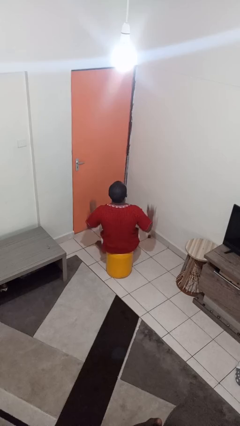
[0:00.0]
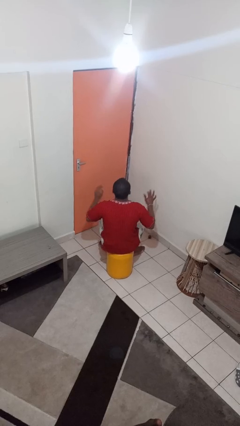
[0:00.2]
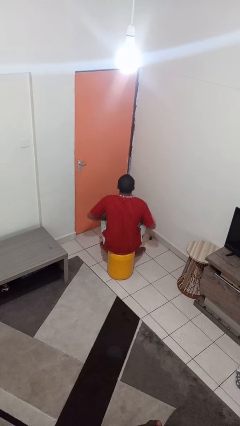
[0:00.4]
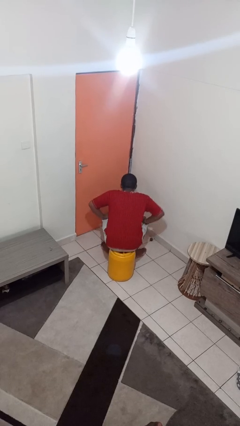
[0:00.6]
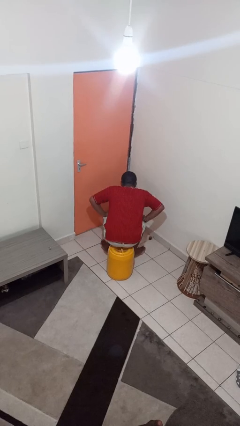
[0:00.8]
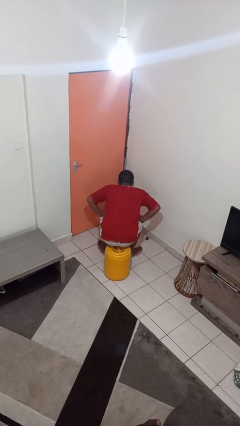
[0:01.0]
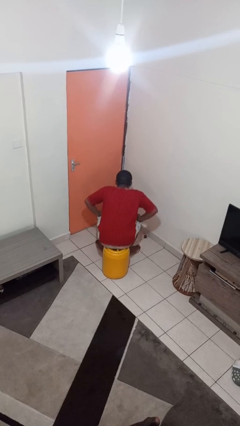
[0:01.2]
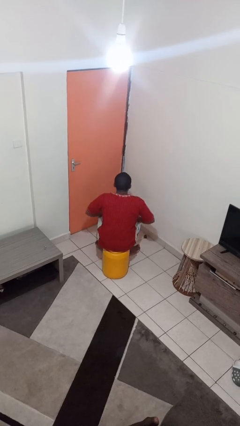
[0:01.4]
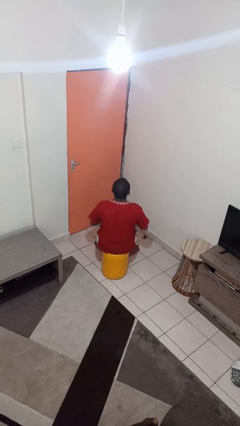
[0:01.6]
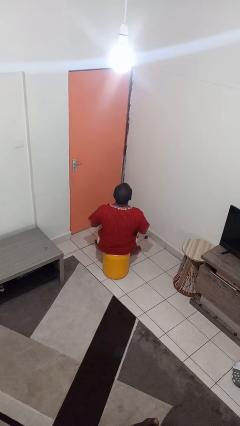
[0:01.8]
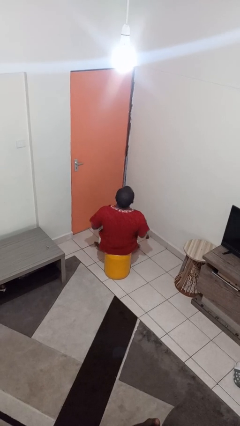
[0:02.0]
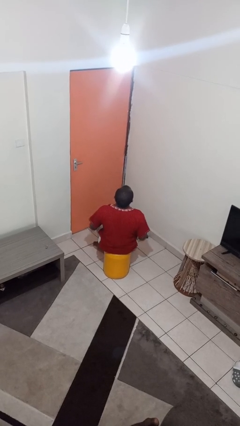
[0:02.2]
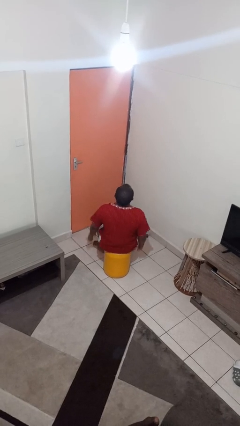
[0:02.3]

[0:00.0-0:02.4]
person slaps hands on thighs

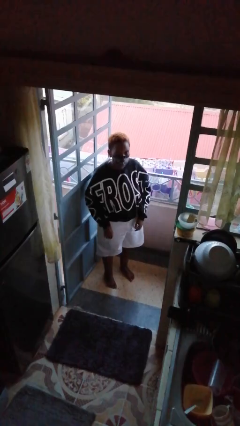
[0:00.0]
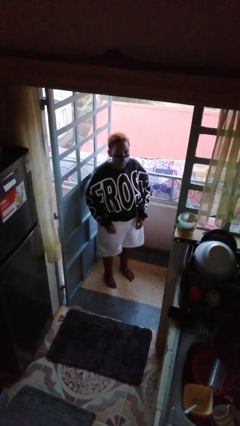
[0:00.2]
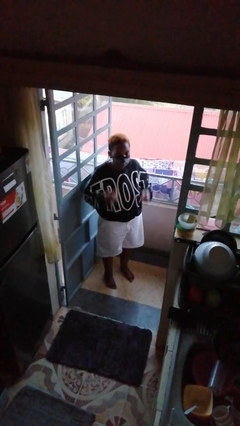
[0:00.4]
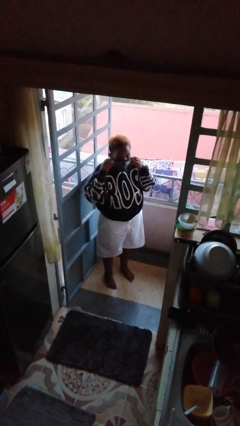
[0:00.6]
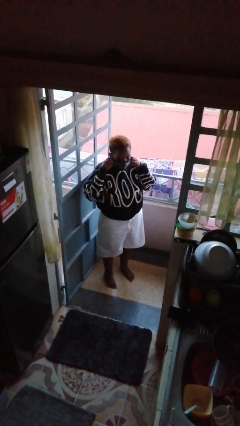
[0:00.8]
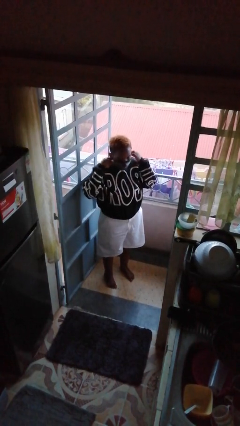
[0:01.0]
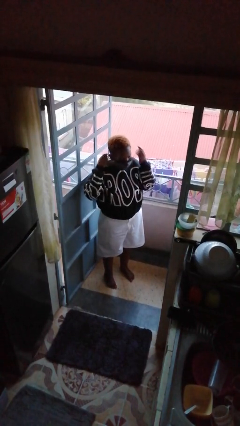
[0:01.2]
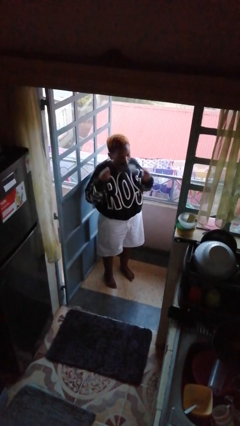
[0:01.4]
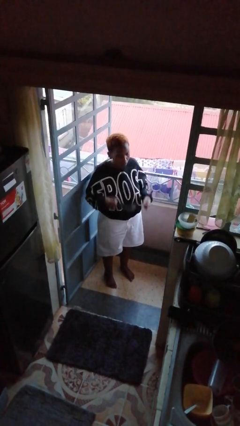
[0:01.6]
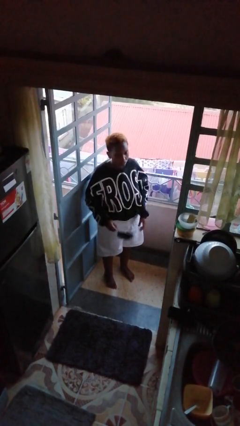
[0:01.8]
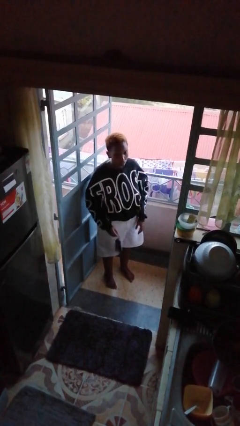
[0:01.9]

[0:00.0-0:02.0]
person takes off facemask

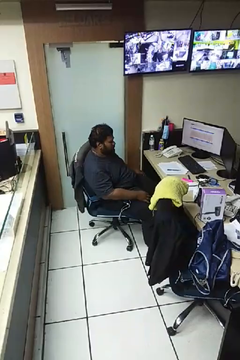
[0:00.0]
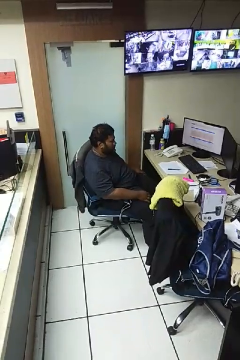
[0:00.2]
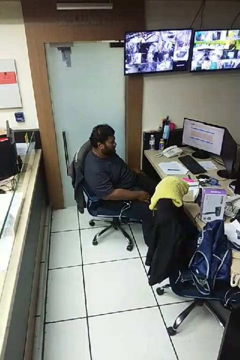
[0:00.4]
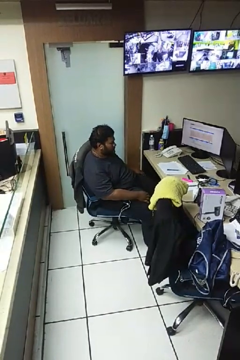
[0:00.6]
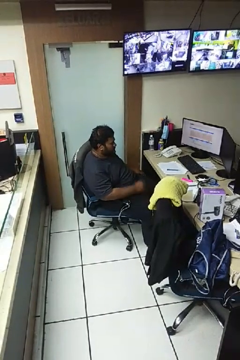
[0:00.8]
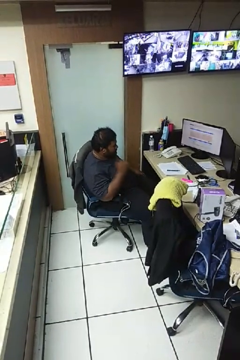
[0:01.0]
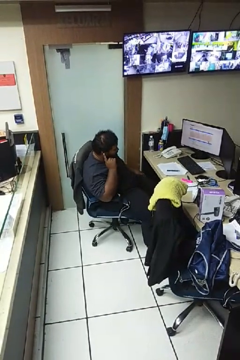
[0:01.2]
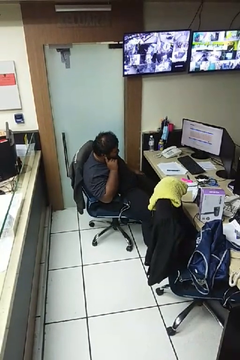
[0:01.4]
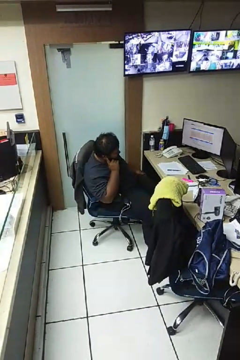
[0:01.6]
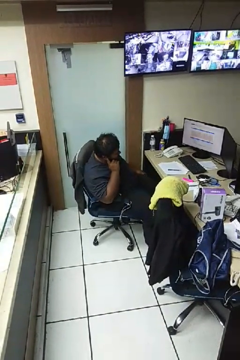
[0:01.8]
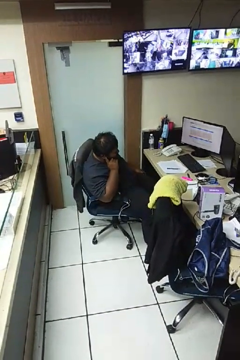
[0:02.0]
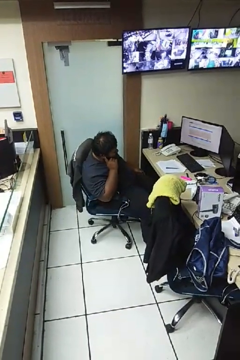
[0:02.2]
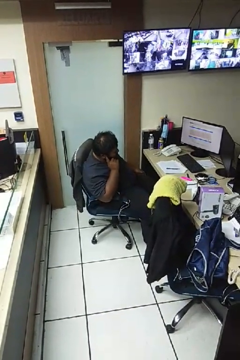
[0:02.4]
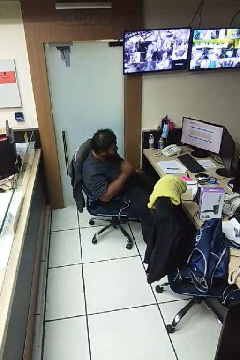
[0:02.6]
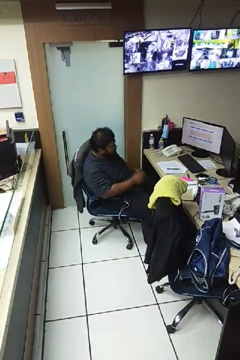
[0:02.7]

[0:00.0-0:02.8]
person gestures listen closely

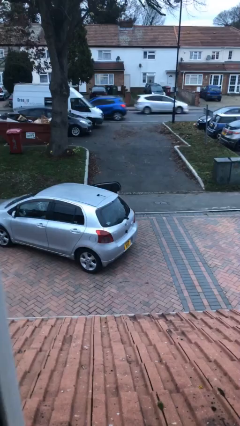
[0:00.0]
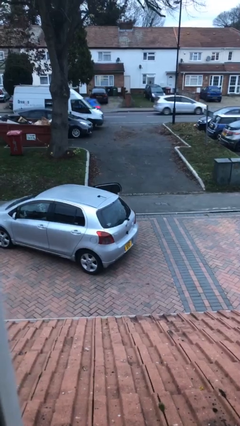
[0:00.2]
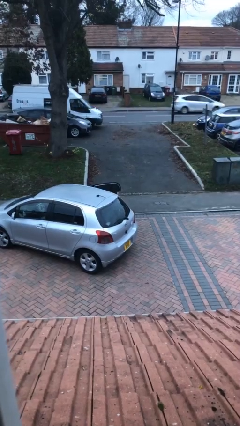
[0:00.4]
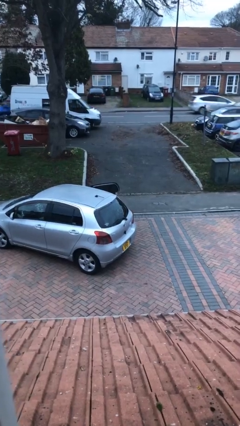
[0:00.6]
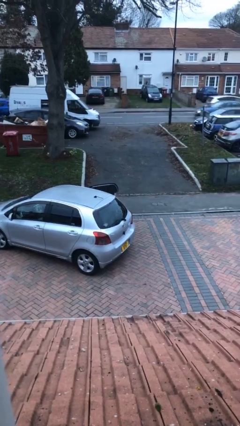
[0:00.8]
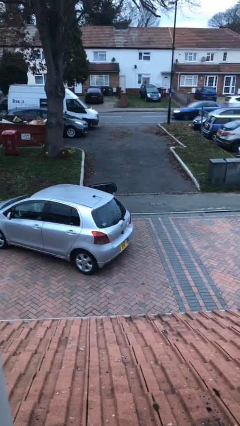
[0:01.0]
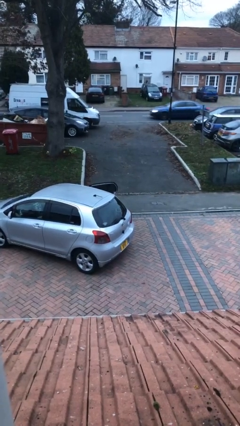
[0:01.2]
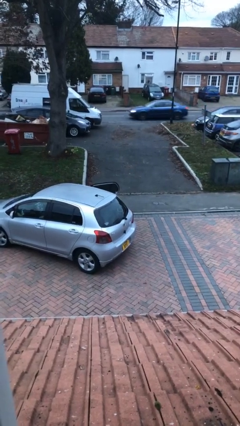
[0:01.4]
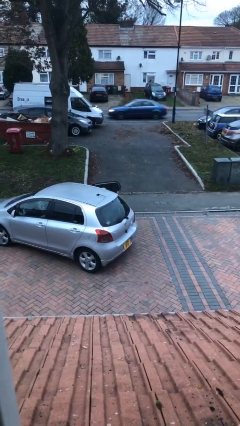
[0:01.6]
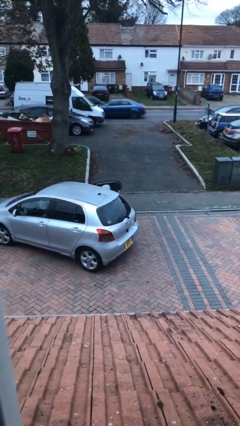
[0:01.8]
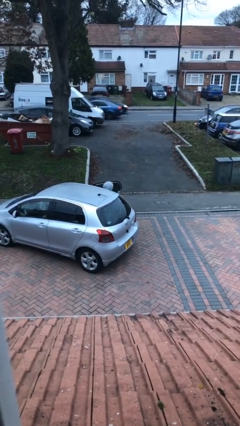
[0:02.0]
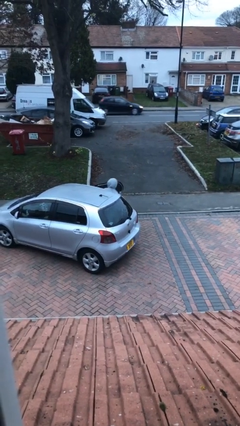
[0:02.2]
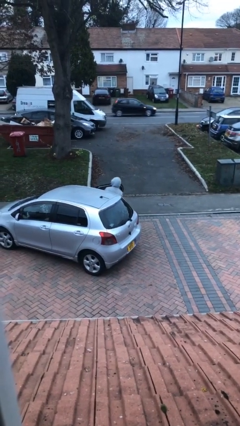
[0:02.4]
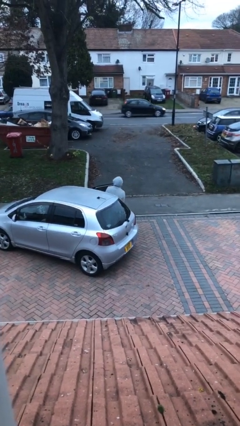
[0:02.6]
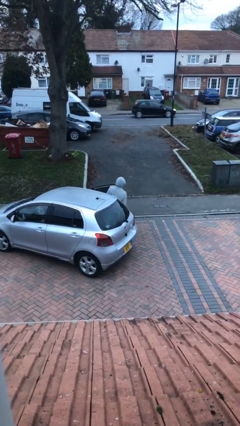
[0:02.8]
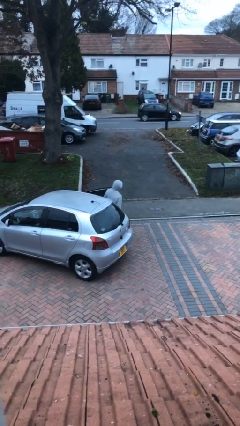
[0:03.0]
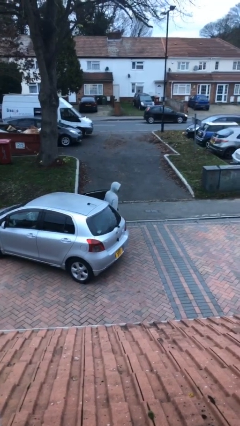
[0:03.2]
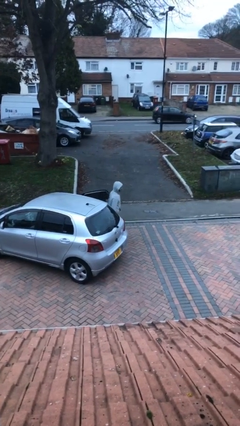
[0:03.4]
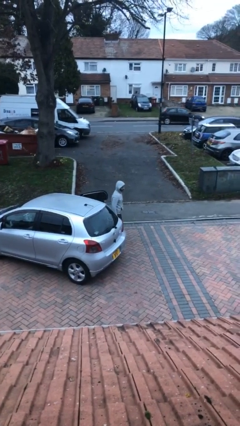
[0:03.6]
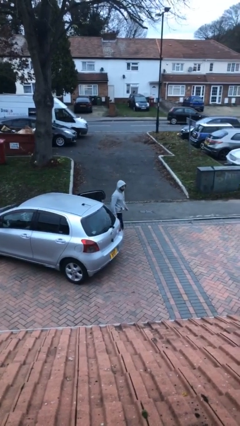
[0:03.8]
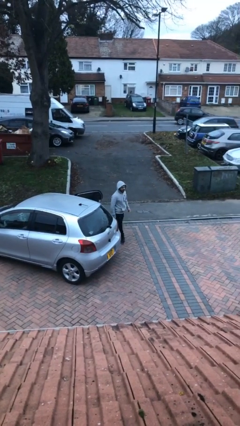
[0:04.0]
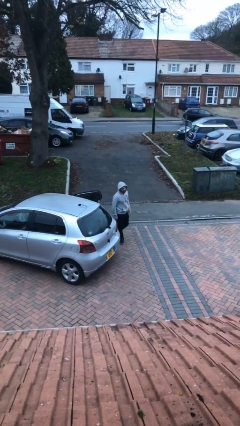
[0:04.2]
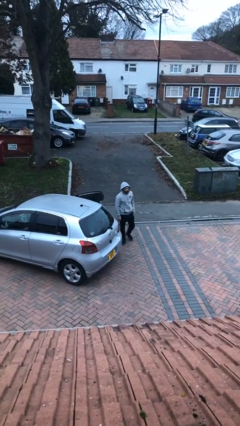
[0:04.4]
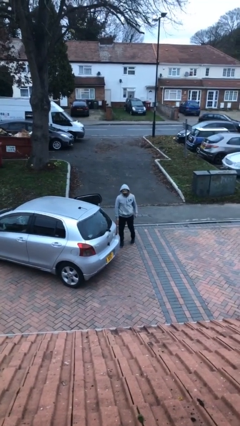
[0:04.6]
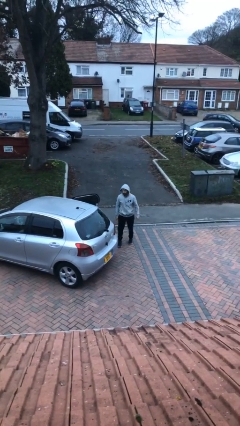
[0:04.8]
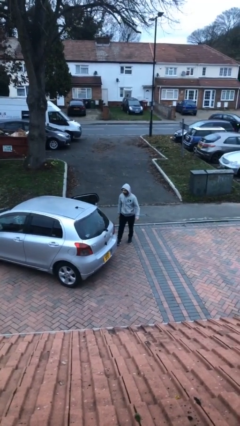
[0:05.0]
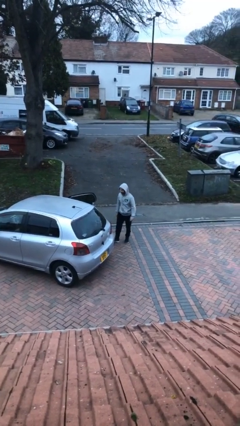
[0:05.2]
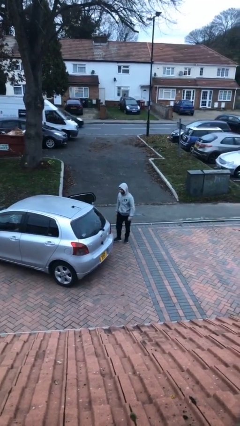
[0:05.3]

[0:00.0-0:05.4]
person exits car

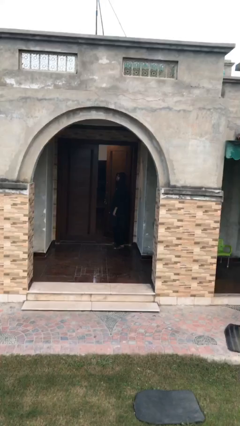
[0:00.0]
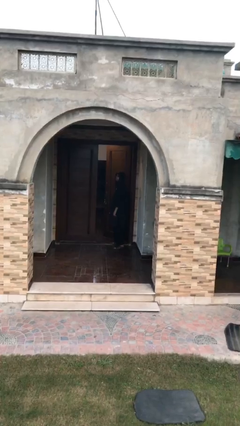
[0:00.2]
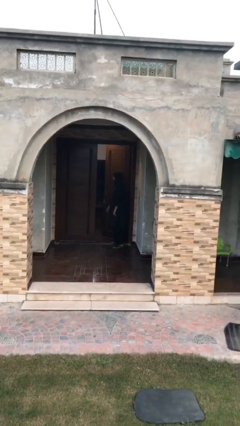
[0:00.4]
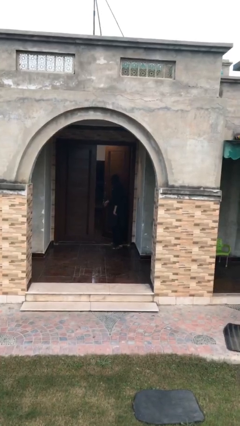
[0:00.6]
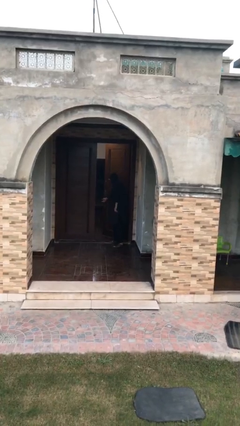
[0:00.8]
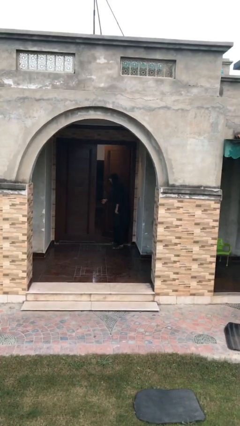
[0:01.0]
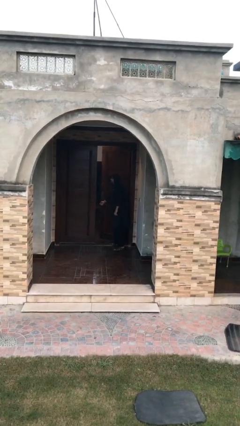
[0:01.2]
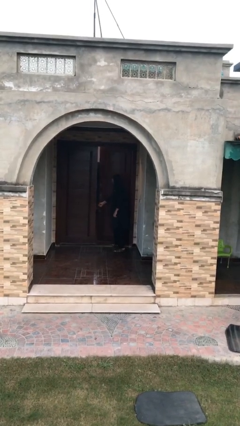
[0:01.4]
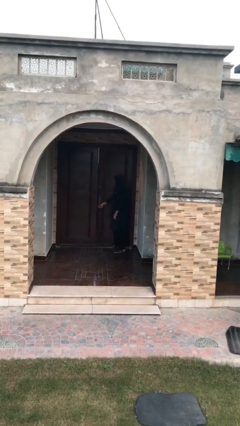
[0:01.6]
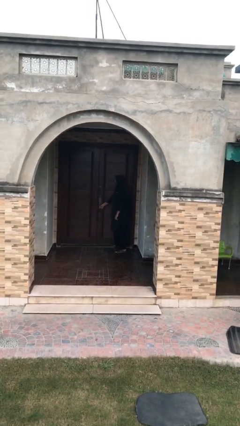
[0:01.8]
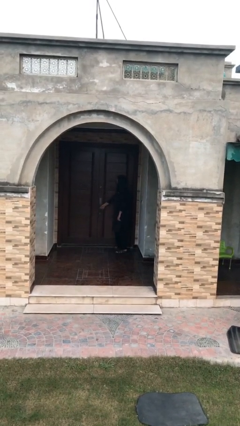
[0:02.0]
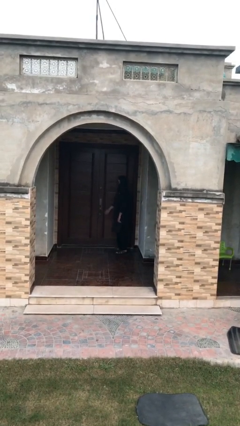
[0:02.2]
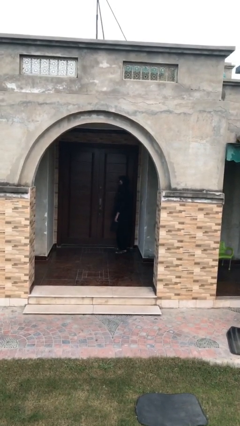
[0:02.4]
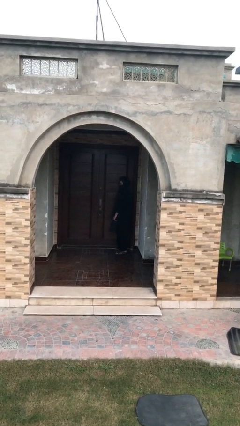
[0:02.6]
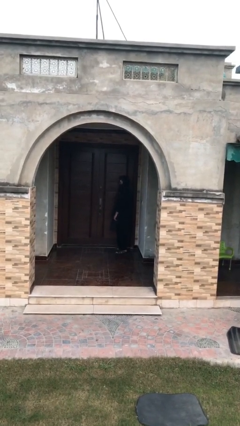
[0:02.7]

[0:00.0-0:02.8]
person closes facility door

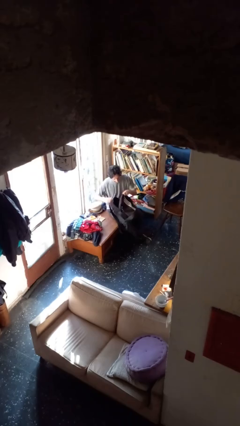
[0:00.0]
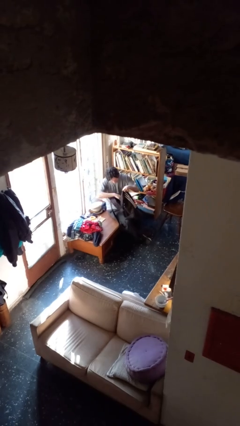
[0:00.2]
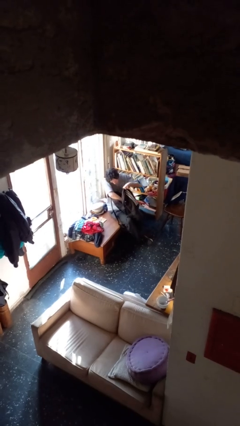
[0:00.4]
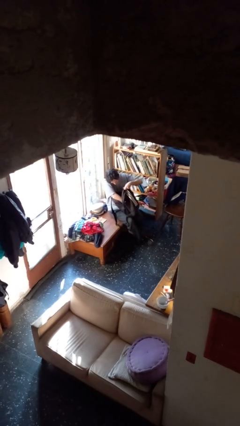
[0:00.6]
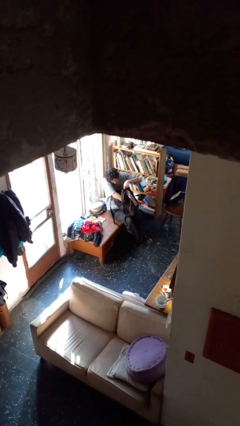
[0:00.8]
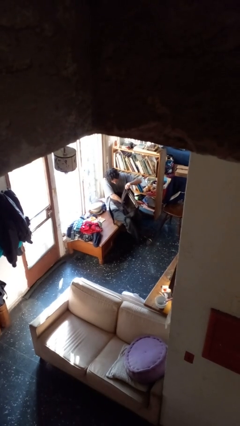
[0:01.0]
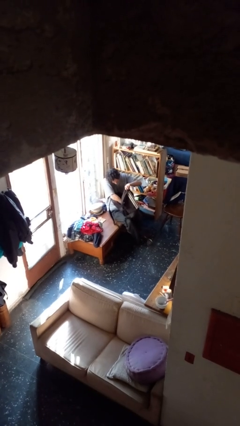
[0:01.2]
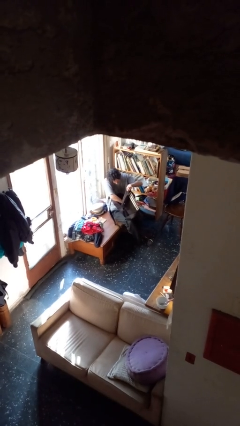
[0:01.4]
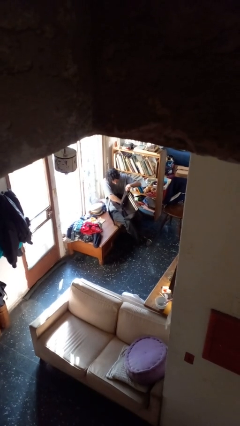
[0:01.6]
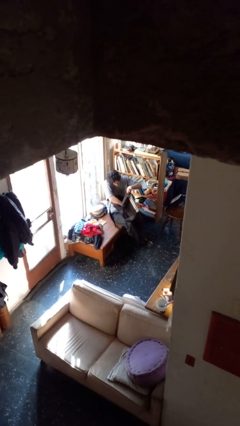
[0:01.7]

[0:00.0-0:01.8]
person searches in backpack

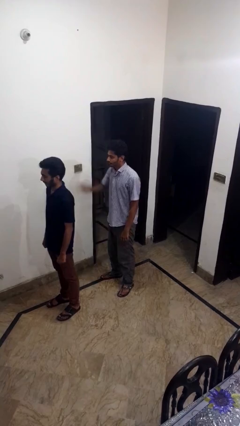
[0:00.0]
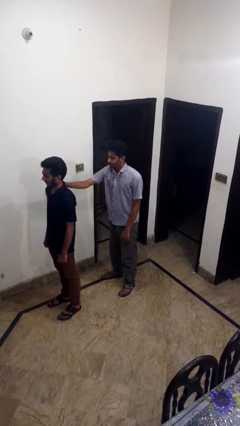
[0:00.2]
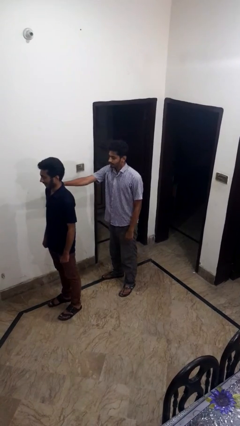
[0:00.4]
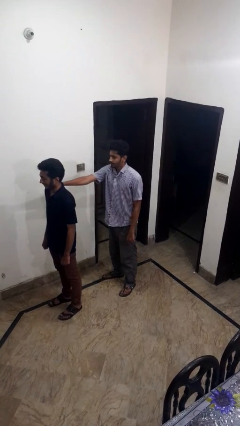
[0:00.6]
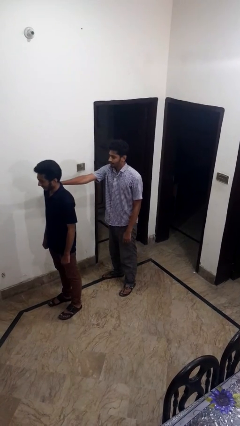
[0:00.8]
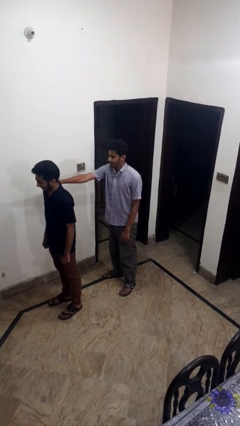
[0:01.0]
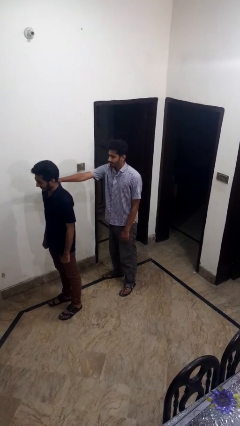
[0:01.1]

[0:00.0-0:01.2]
person grabs person by shoulder
